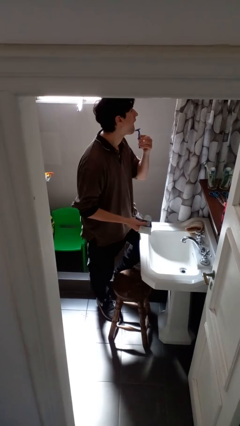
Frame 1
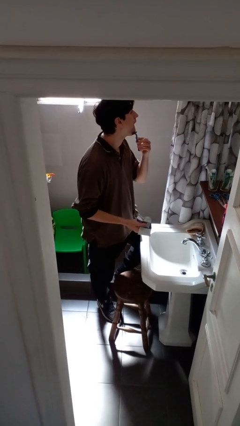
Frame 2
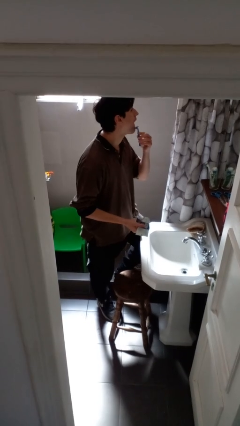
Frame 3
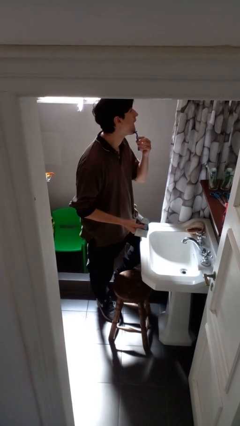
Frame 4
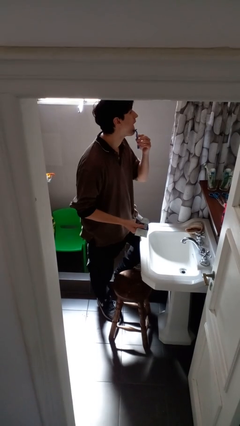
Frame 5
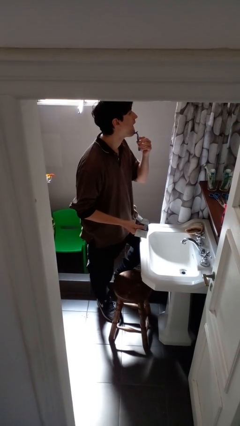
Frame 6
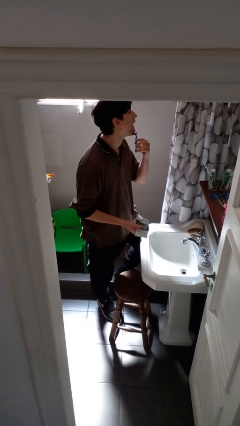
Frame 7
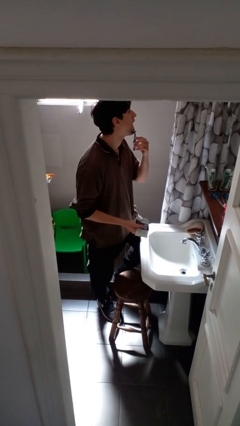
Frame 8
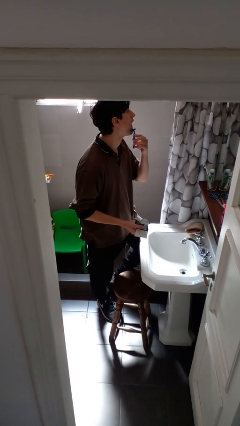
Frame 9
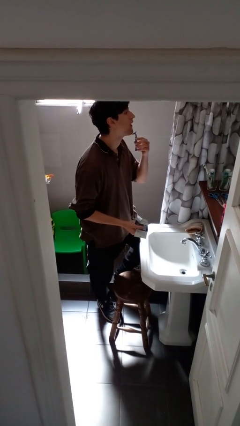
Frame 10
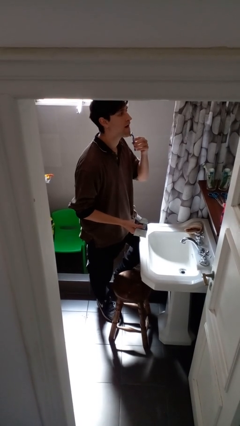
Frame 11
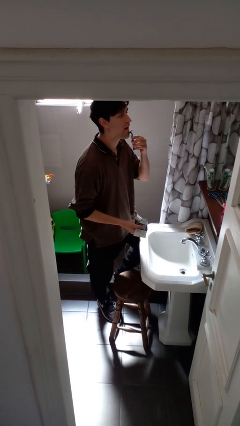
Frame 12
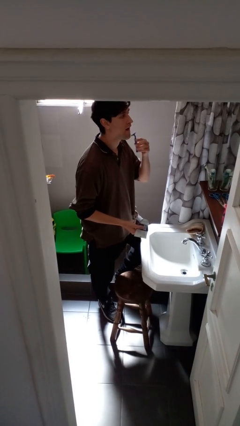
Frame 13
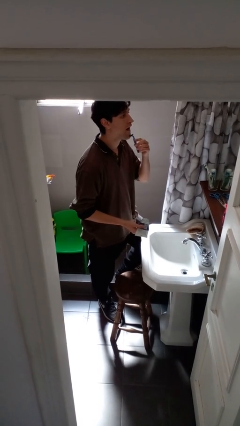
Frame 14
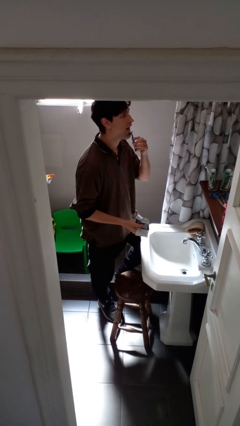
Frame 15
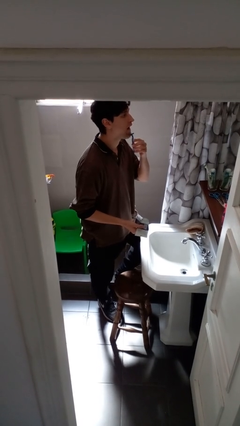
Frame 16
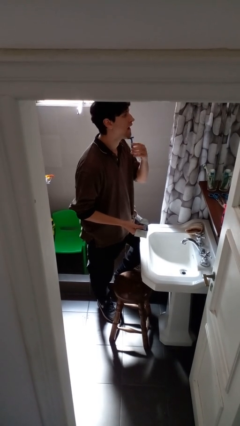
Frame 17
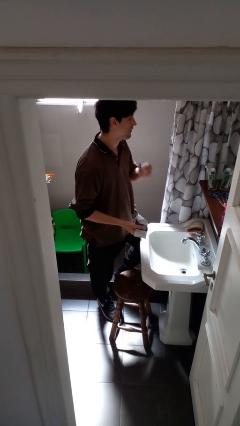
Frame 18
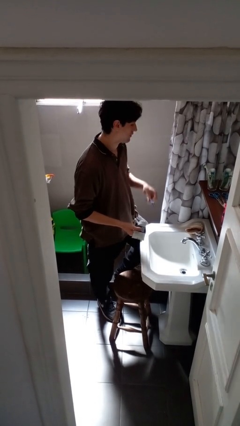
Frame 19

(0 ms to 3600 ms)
person shaves face

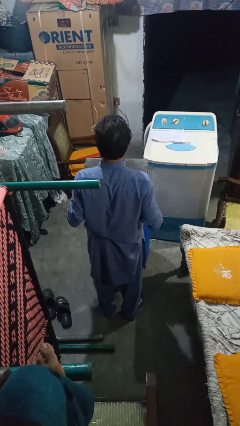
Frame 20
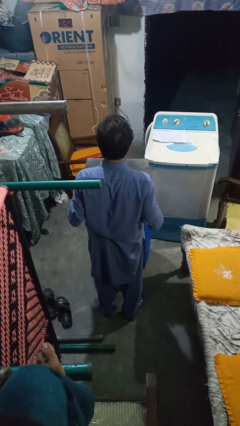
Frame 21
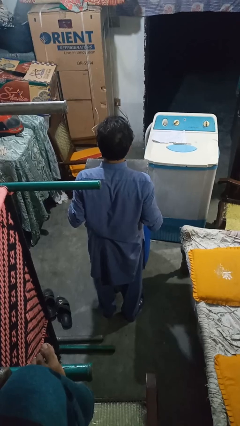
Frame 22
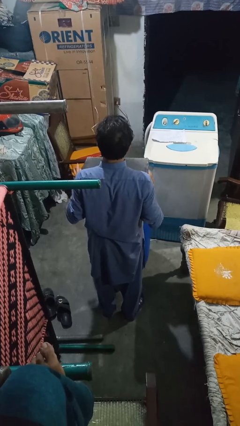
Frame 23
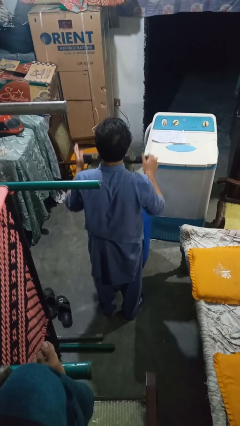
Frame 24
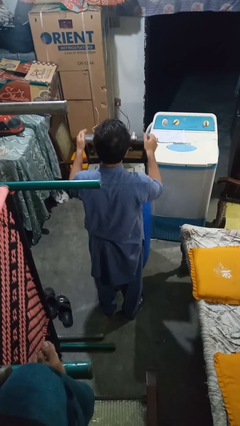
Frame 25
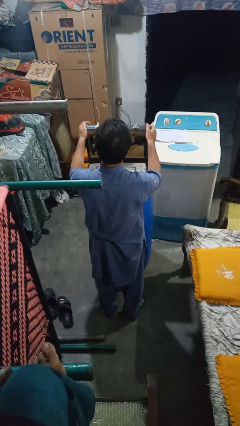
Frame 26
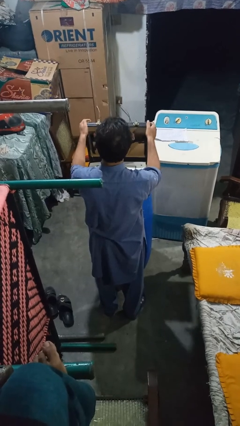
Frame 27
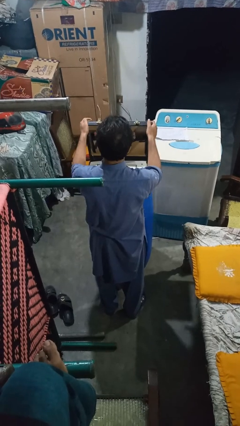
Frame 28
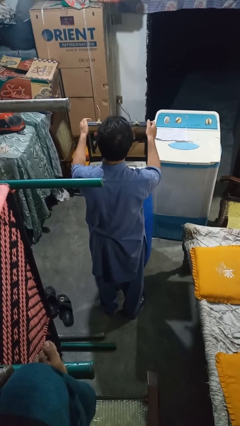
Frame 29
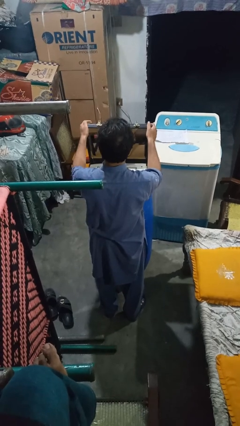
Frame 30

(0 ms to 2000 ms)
person opens suitcase

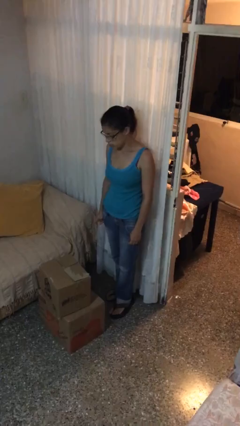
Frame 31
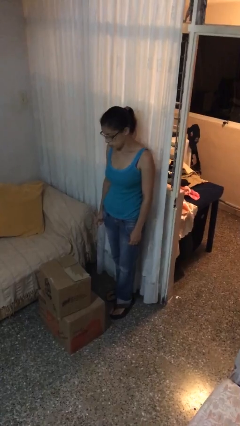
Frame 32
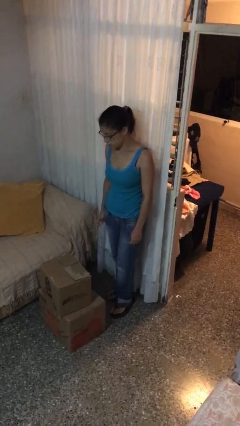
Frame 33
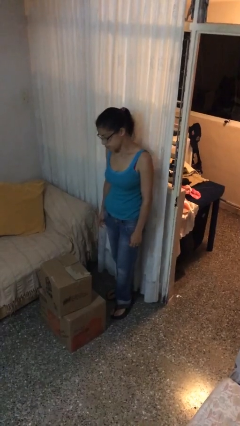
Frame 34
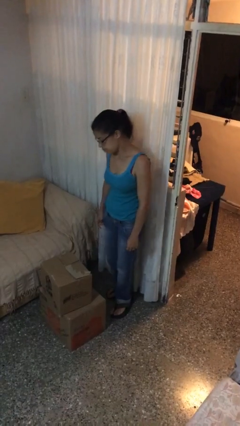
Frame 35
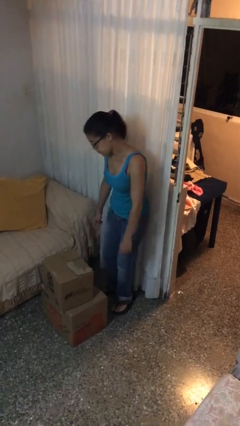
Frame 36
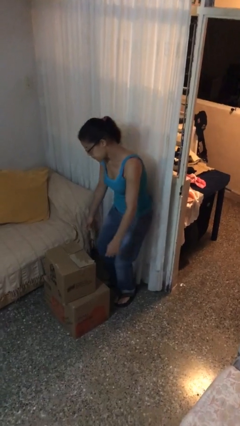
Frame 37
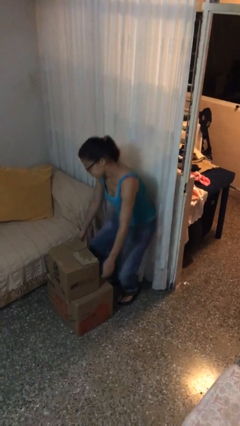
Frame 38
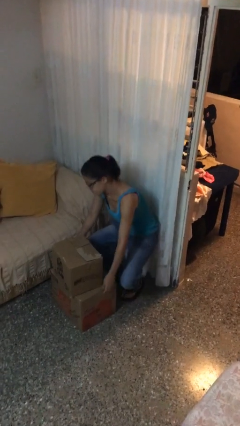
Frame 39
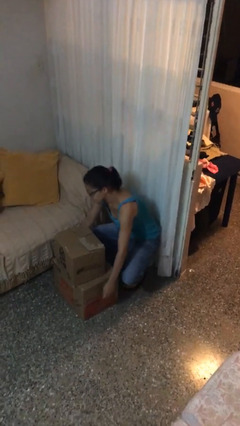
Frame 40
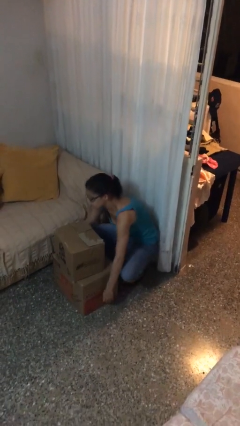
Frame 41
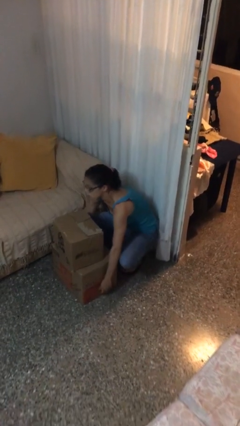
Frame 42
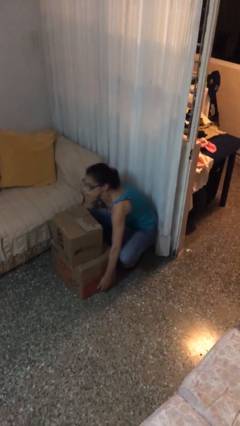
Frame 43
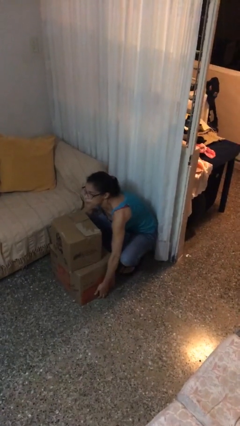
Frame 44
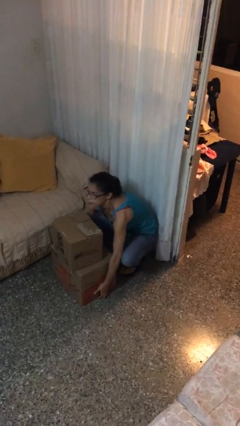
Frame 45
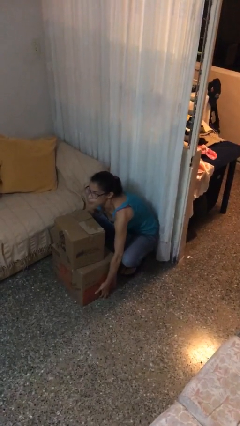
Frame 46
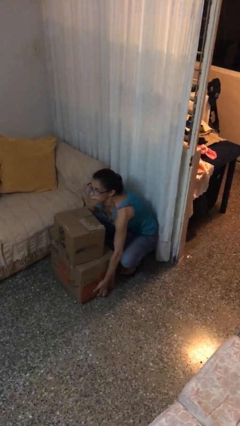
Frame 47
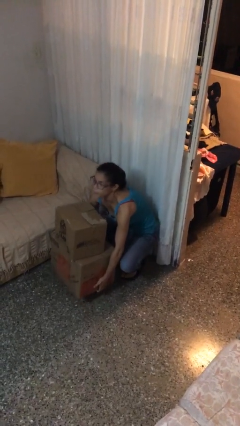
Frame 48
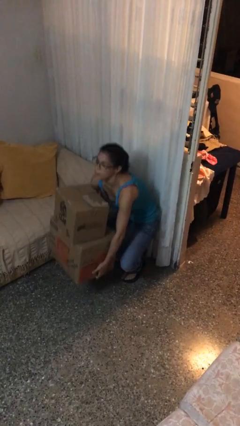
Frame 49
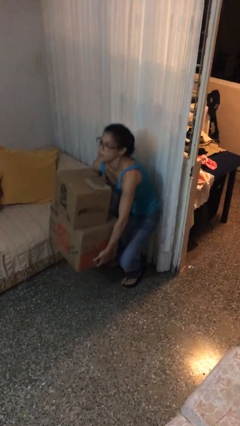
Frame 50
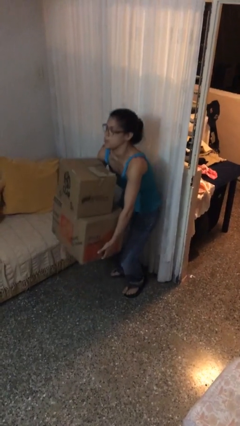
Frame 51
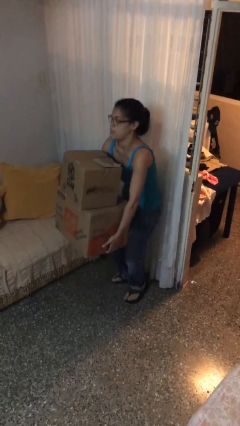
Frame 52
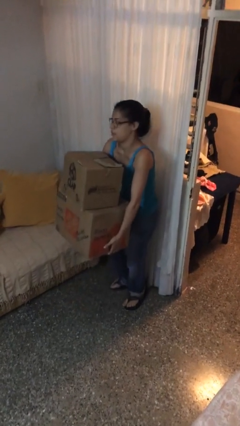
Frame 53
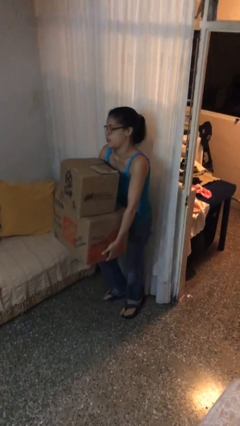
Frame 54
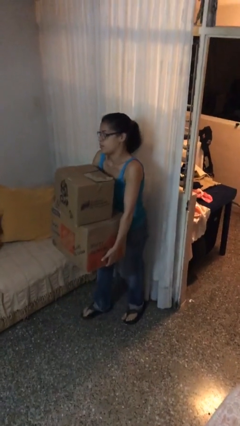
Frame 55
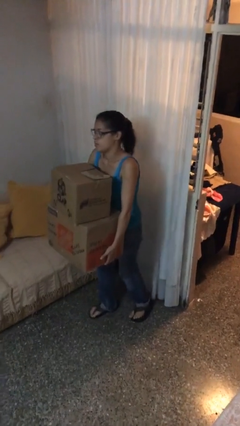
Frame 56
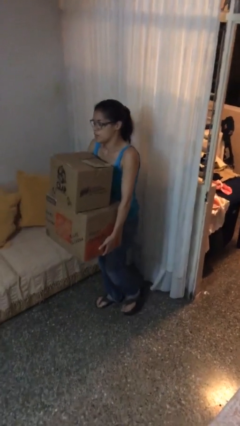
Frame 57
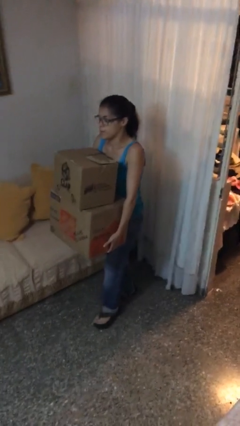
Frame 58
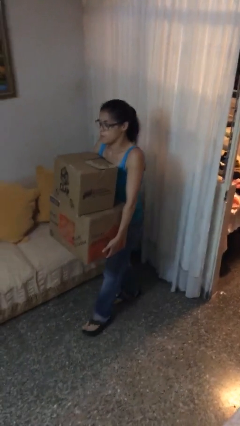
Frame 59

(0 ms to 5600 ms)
person picks up object from floor

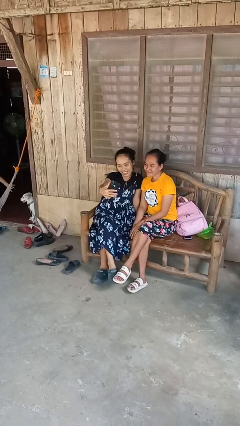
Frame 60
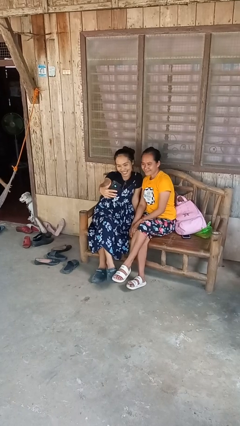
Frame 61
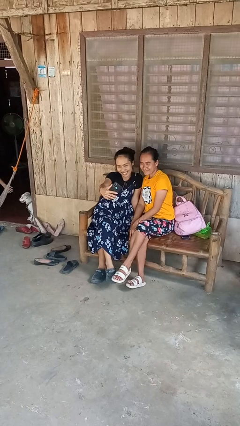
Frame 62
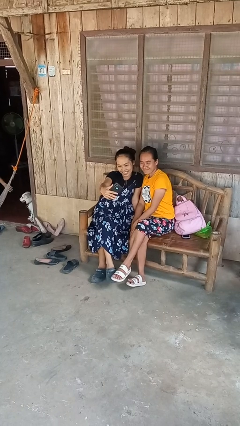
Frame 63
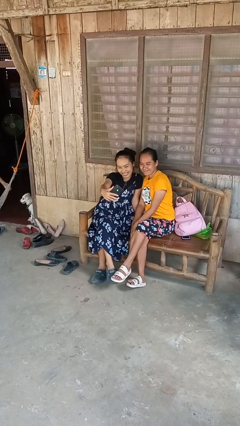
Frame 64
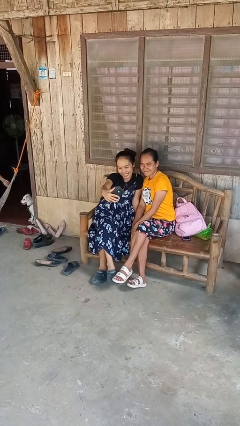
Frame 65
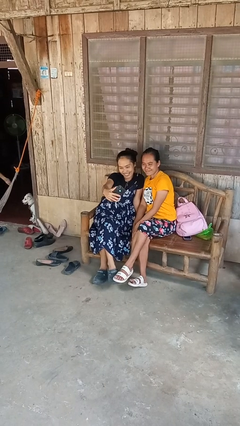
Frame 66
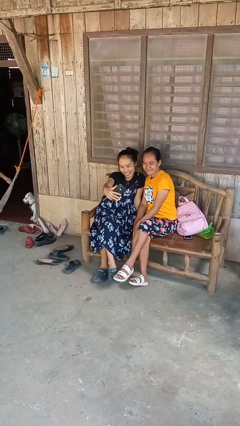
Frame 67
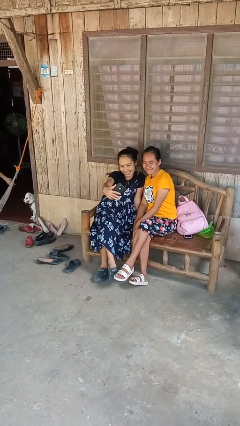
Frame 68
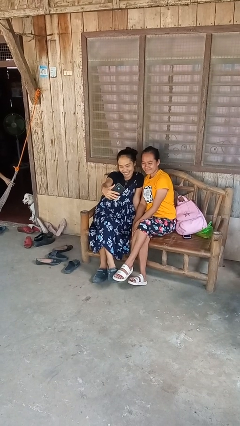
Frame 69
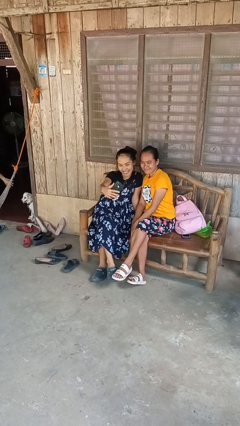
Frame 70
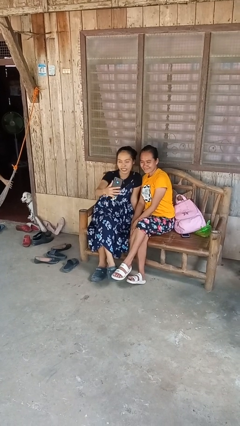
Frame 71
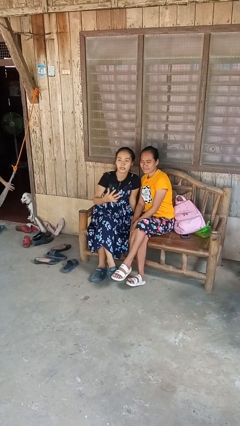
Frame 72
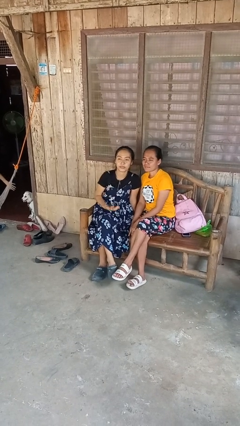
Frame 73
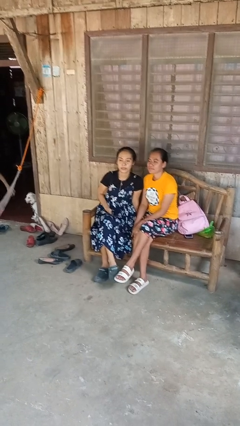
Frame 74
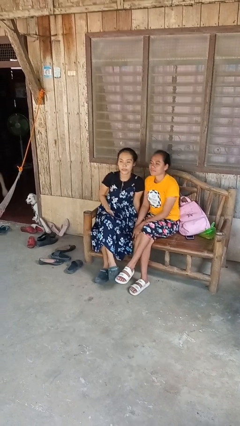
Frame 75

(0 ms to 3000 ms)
person takes selfie with person

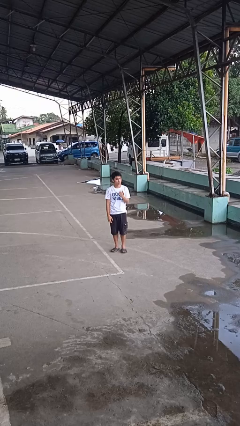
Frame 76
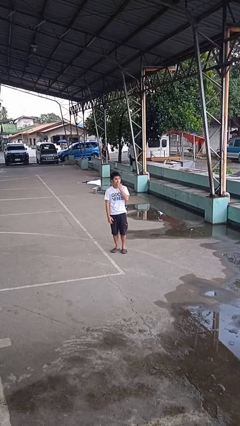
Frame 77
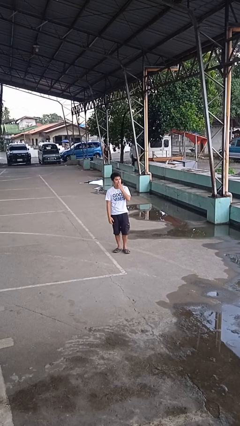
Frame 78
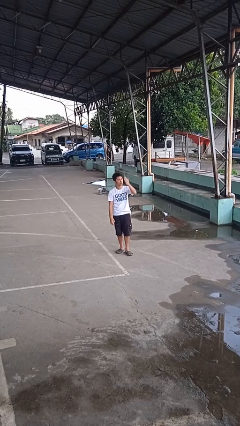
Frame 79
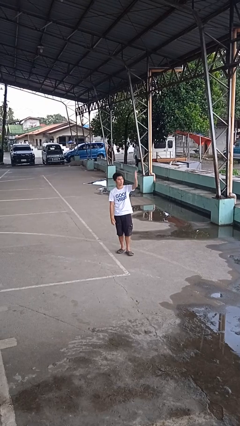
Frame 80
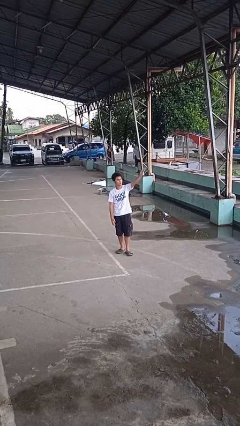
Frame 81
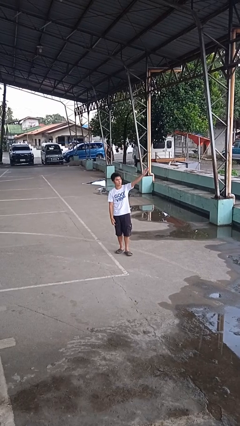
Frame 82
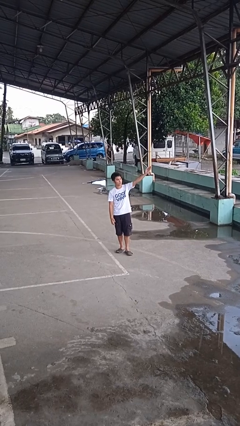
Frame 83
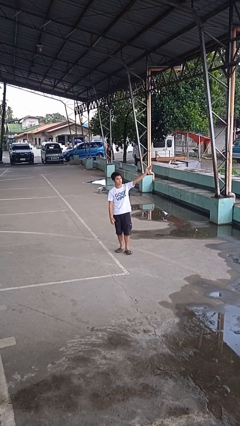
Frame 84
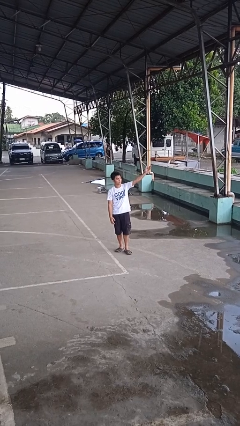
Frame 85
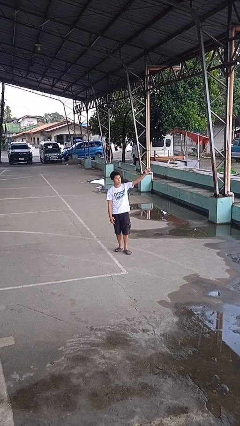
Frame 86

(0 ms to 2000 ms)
person gestures blow kiss

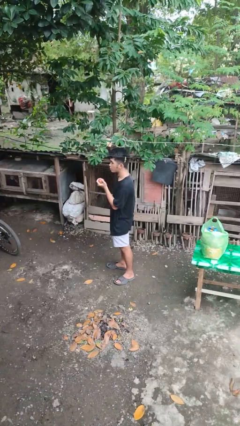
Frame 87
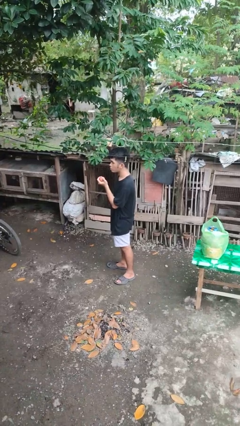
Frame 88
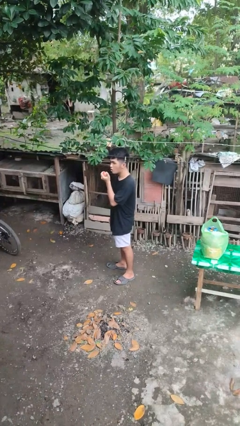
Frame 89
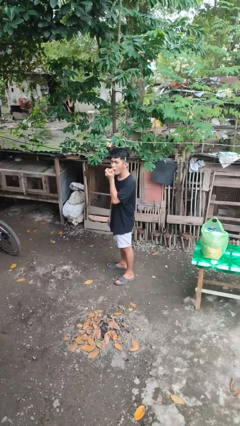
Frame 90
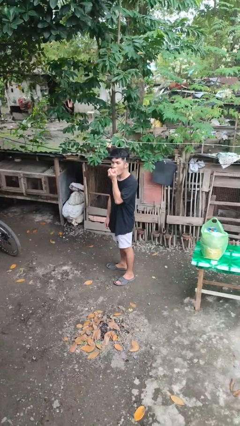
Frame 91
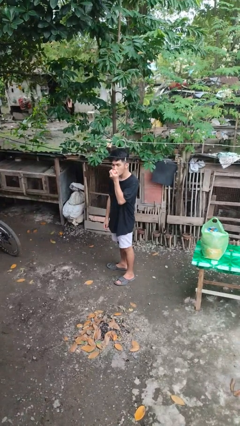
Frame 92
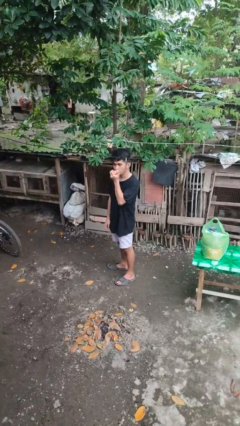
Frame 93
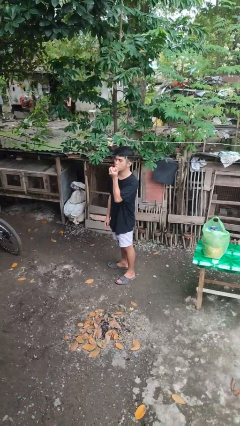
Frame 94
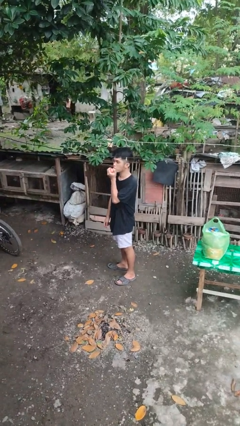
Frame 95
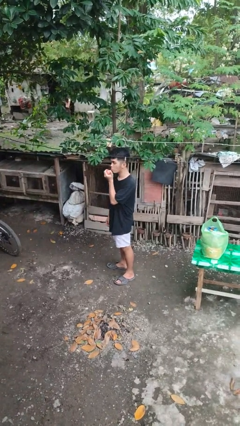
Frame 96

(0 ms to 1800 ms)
person eats apple
